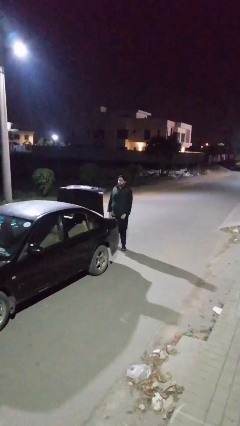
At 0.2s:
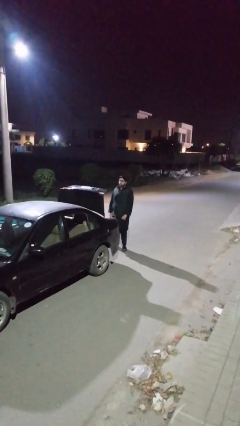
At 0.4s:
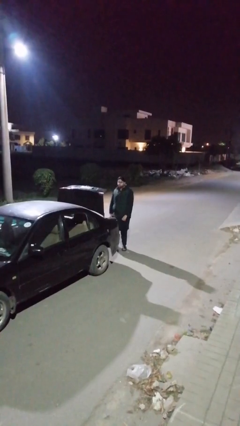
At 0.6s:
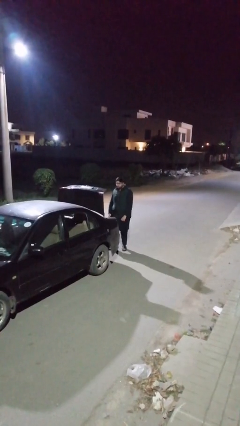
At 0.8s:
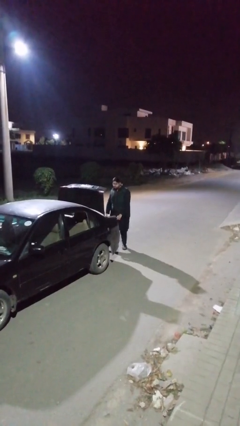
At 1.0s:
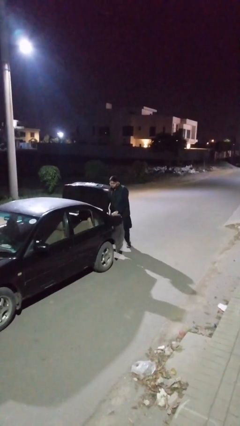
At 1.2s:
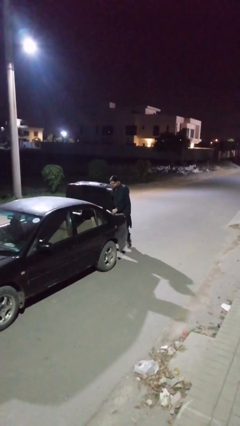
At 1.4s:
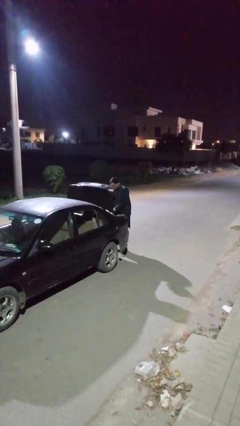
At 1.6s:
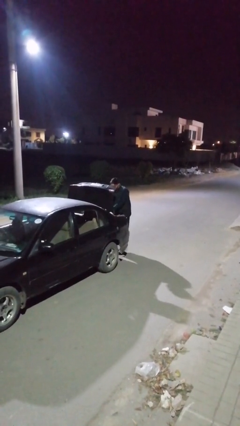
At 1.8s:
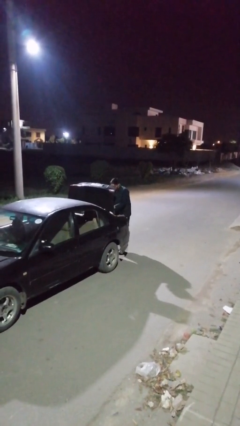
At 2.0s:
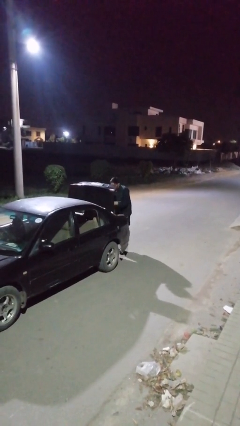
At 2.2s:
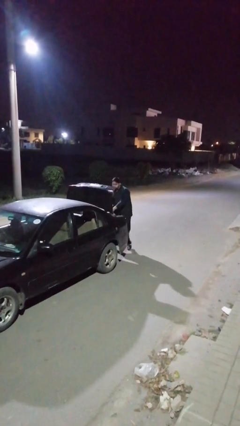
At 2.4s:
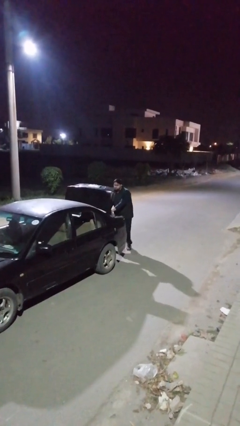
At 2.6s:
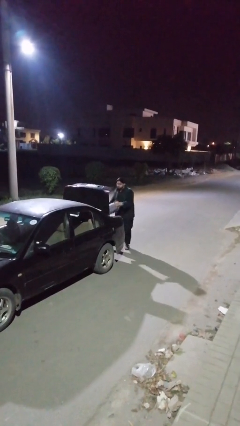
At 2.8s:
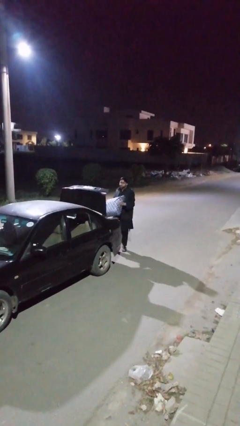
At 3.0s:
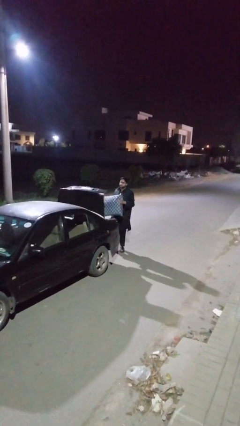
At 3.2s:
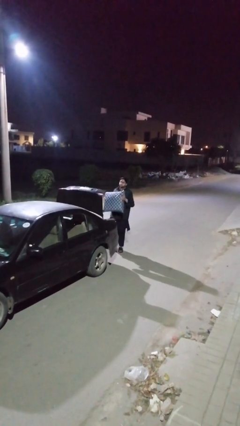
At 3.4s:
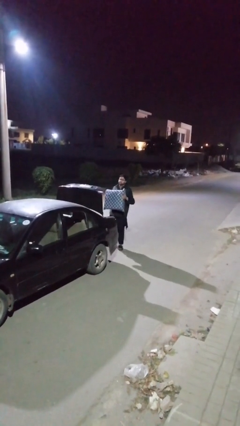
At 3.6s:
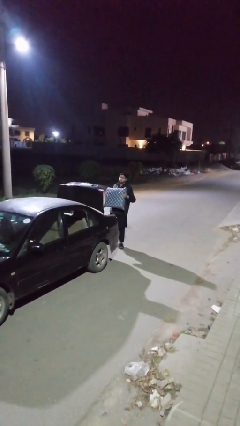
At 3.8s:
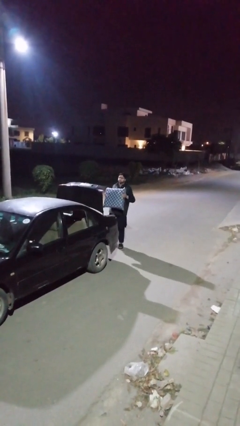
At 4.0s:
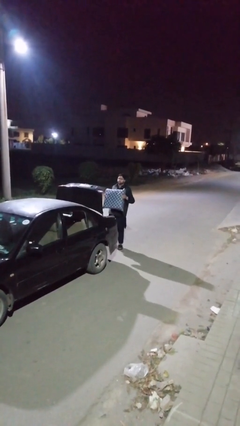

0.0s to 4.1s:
person unloads car

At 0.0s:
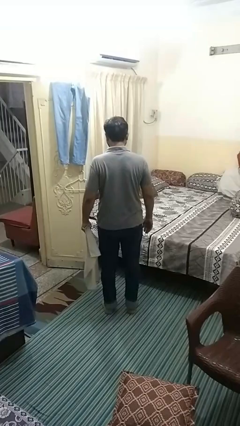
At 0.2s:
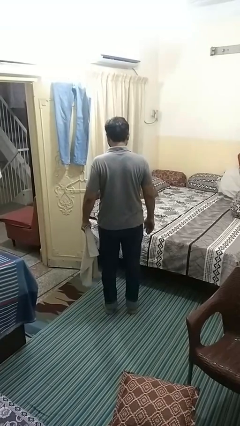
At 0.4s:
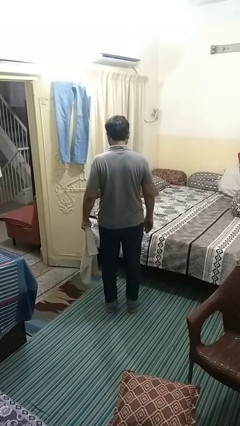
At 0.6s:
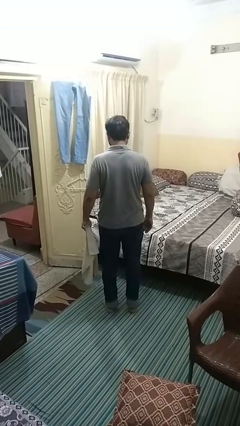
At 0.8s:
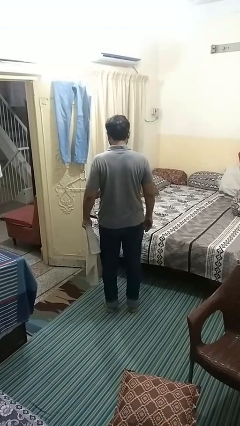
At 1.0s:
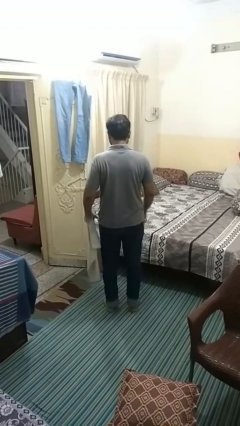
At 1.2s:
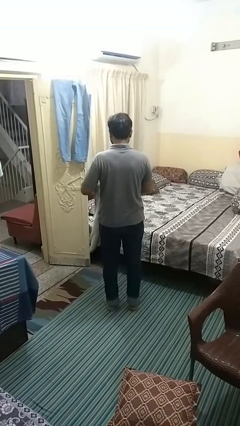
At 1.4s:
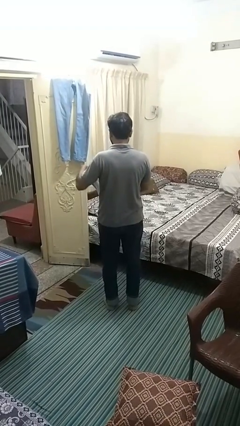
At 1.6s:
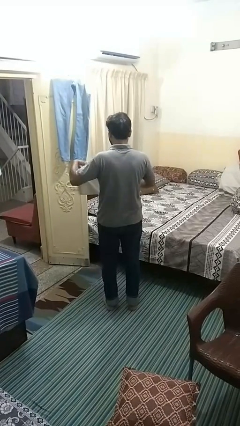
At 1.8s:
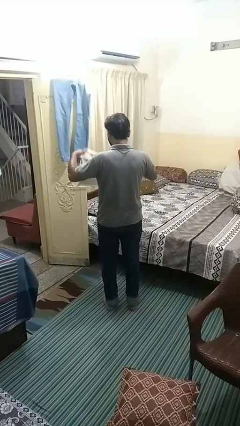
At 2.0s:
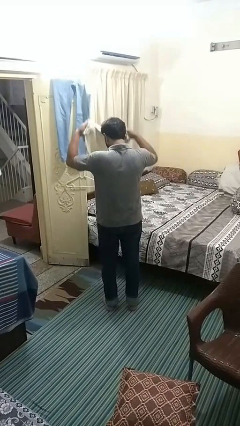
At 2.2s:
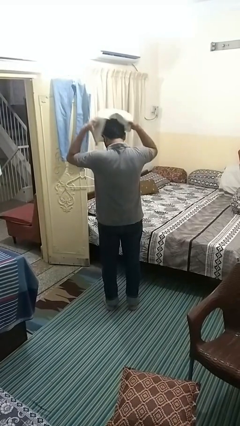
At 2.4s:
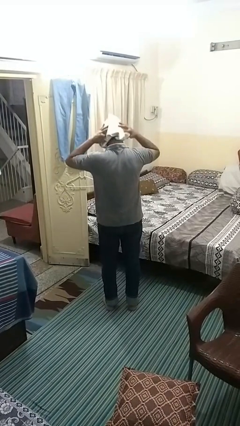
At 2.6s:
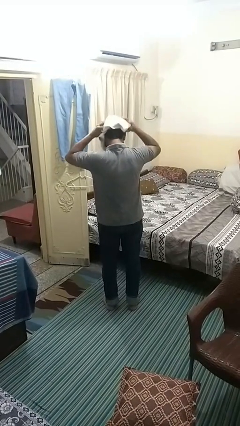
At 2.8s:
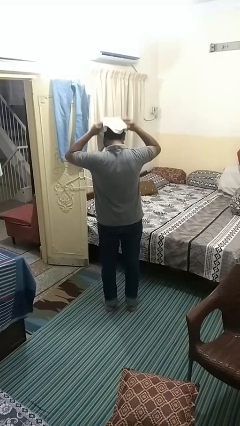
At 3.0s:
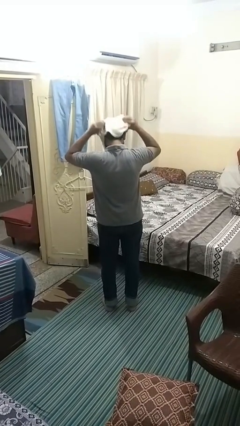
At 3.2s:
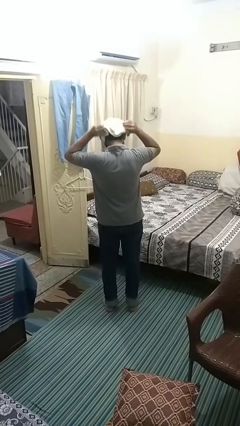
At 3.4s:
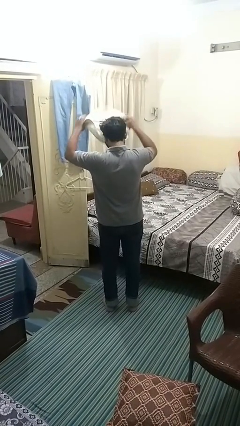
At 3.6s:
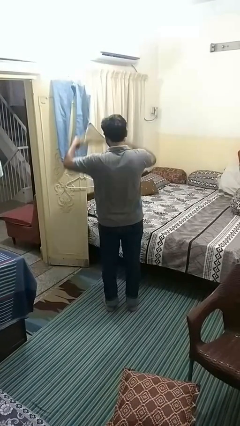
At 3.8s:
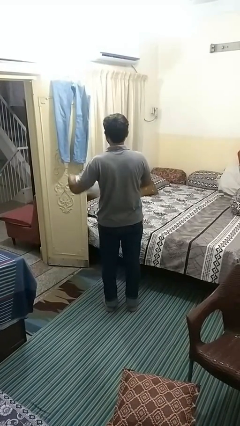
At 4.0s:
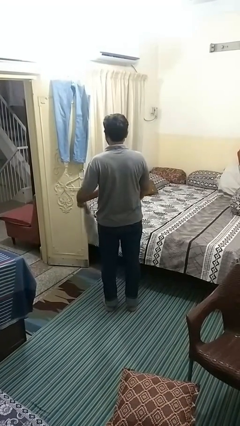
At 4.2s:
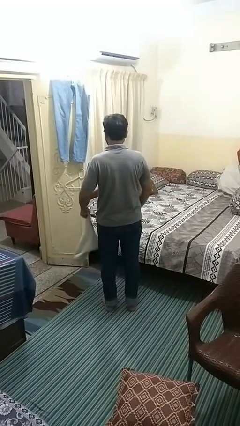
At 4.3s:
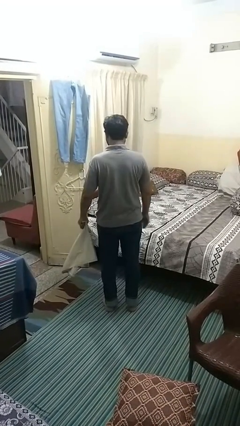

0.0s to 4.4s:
person dries hair with towel

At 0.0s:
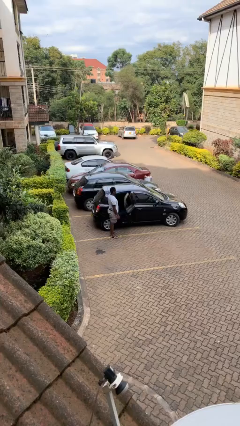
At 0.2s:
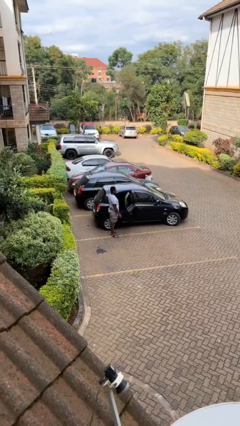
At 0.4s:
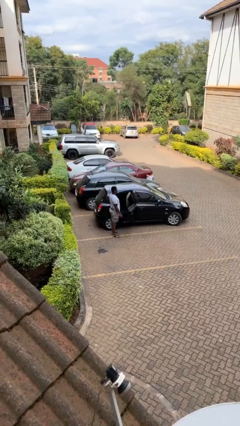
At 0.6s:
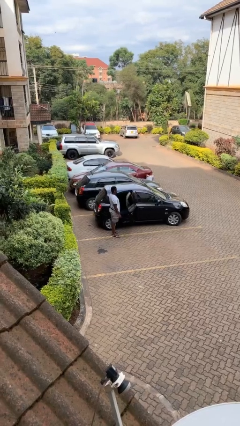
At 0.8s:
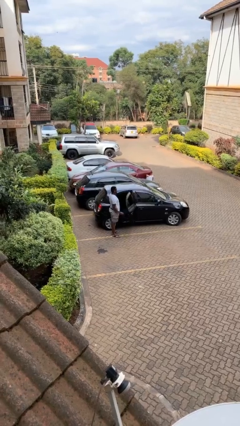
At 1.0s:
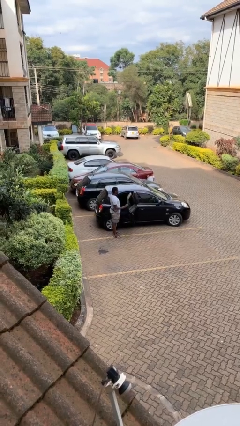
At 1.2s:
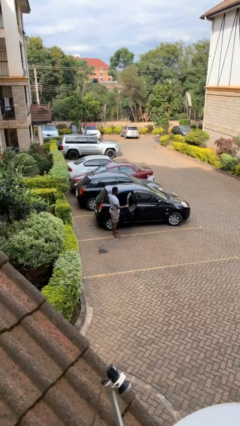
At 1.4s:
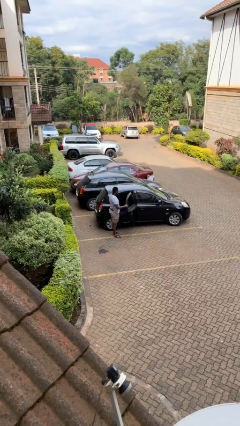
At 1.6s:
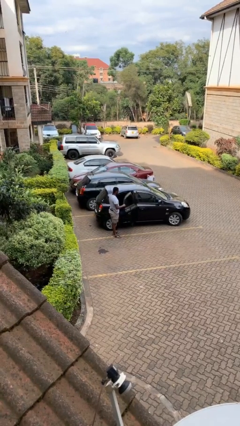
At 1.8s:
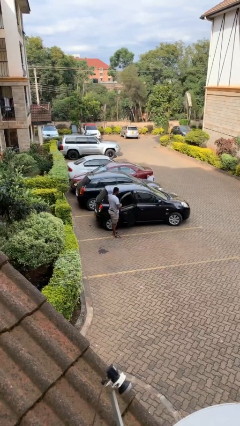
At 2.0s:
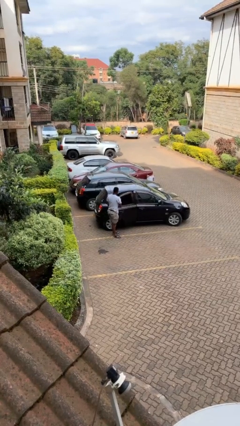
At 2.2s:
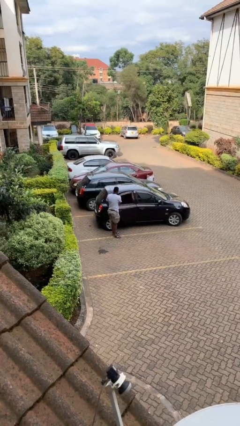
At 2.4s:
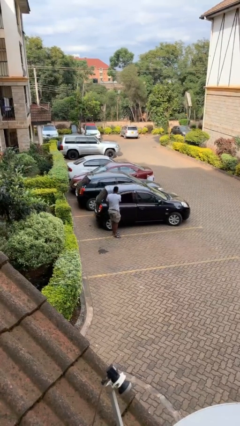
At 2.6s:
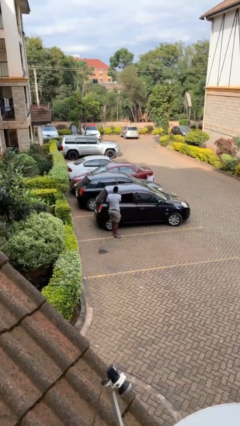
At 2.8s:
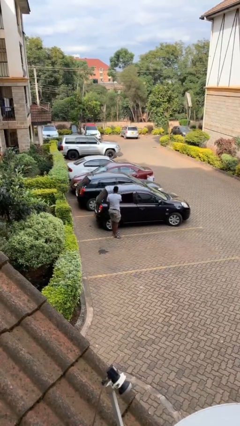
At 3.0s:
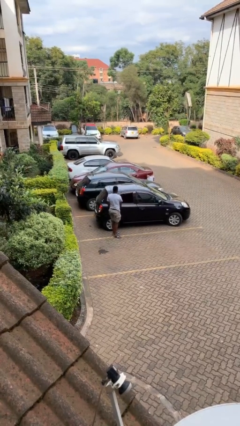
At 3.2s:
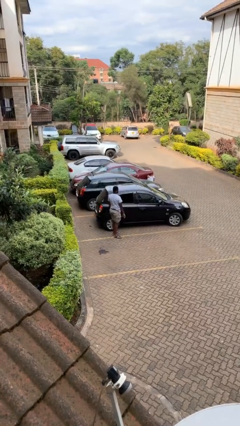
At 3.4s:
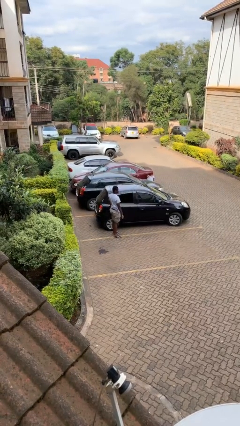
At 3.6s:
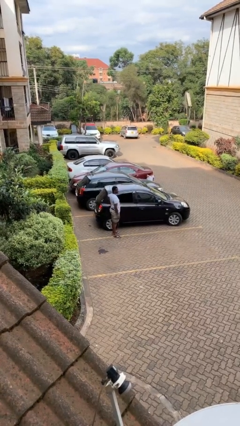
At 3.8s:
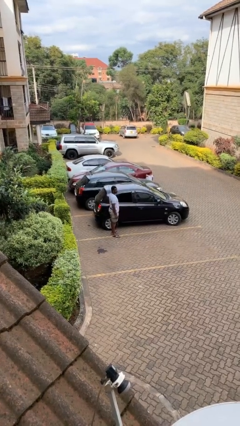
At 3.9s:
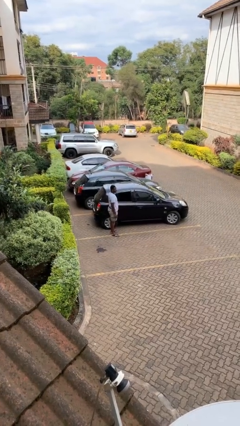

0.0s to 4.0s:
person closes car door

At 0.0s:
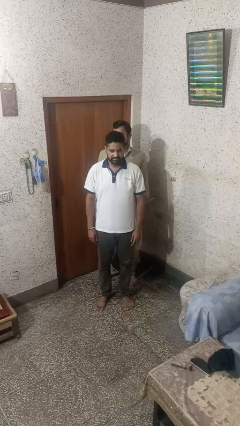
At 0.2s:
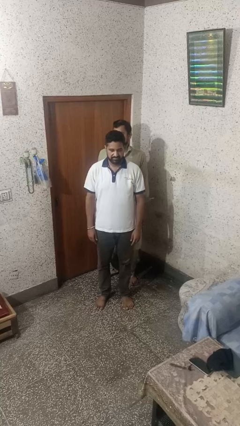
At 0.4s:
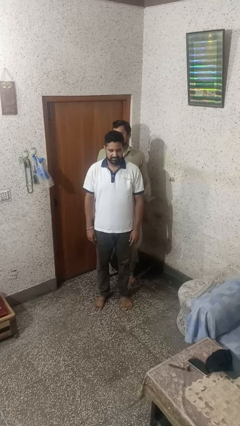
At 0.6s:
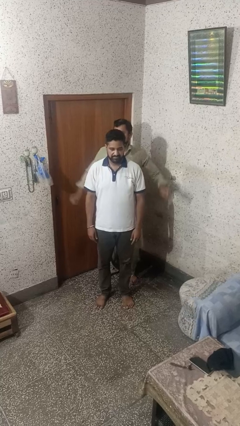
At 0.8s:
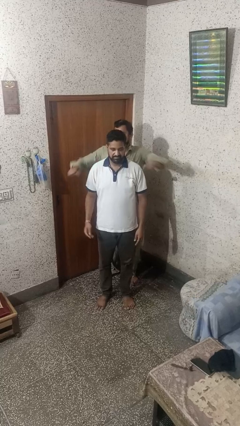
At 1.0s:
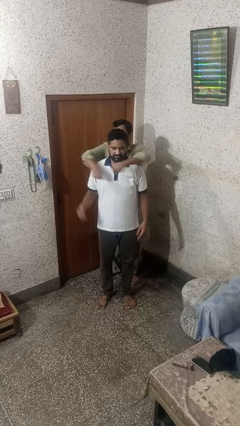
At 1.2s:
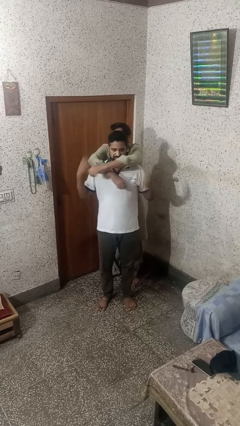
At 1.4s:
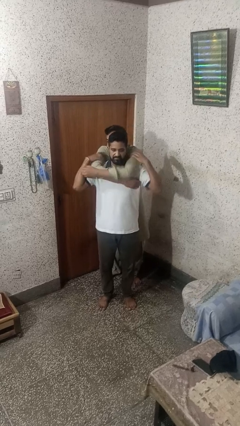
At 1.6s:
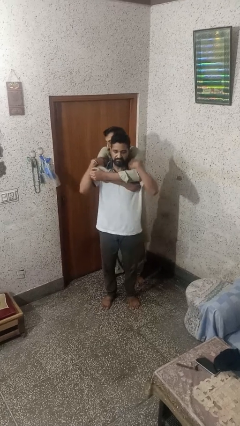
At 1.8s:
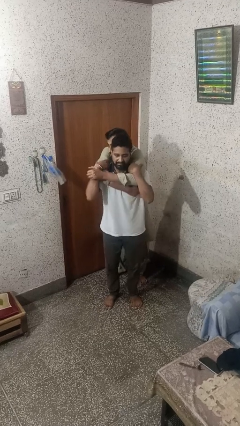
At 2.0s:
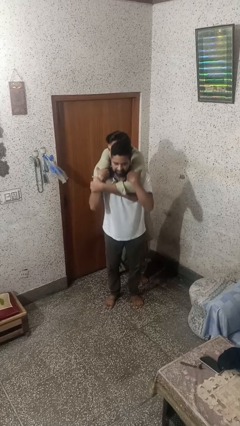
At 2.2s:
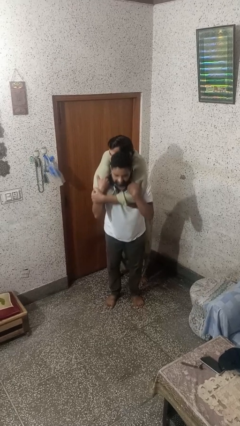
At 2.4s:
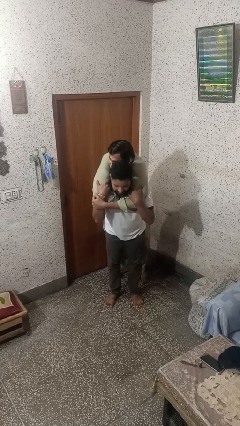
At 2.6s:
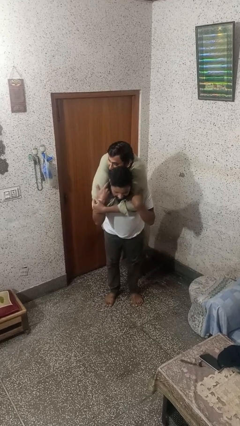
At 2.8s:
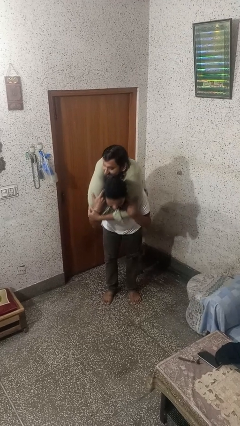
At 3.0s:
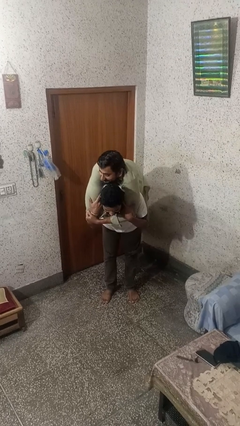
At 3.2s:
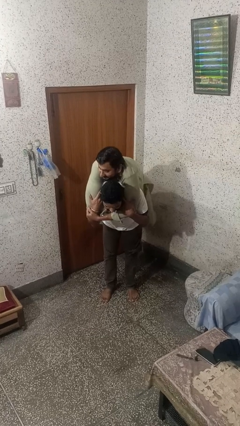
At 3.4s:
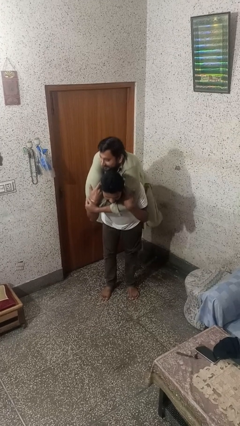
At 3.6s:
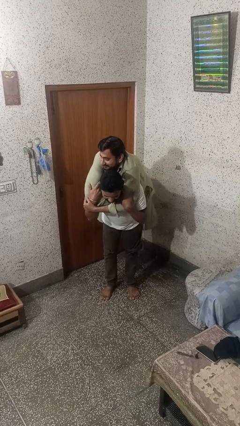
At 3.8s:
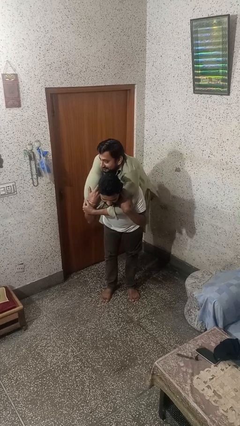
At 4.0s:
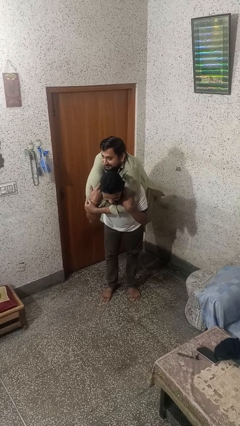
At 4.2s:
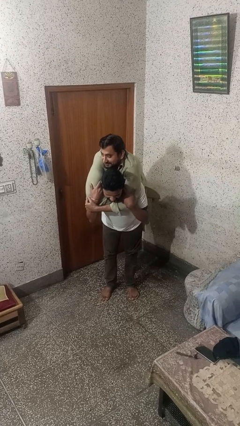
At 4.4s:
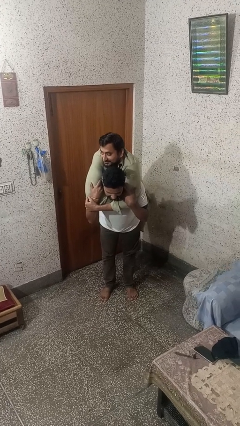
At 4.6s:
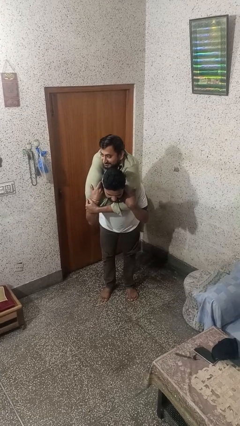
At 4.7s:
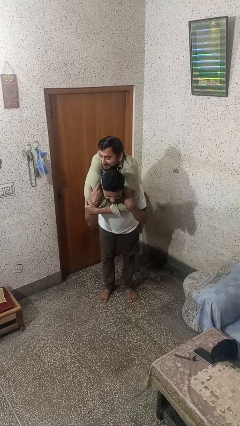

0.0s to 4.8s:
person carries person on back
